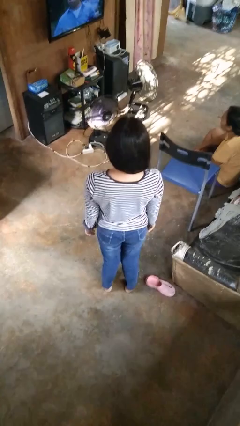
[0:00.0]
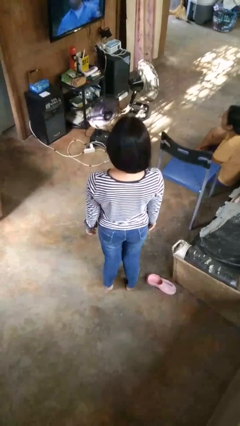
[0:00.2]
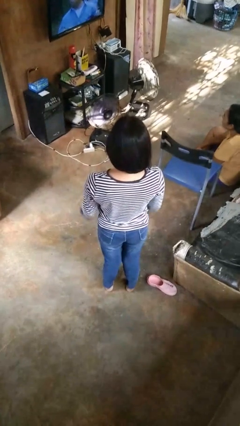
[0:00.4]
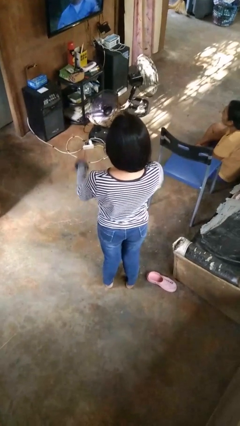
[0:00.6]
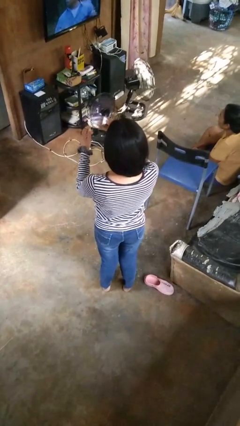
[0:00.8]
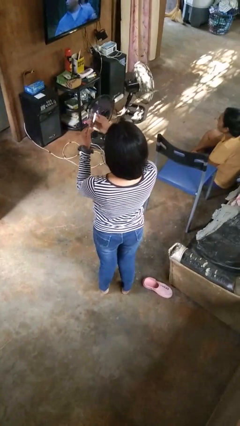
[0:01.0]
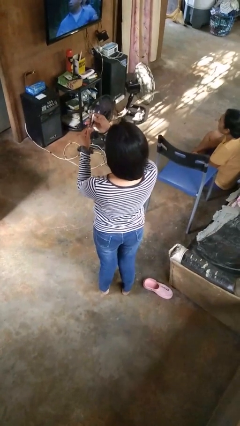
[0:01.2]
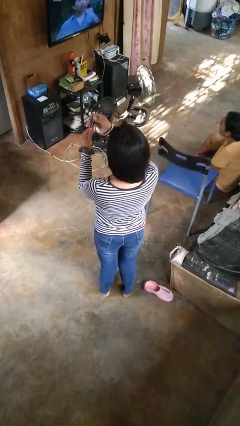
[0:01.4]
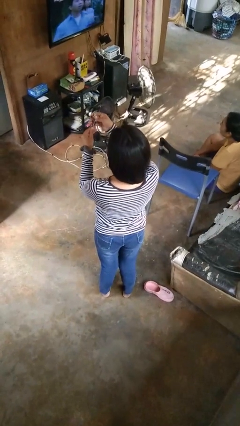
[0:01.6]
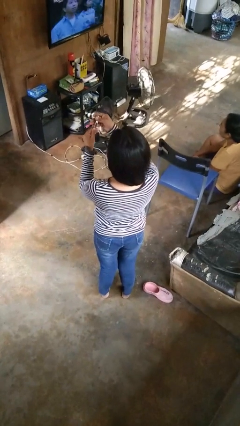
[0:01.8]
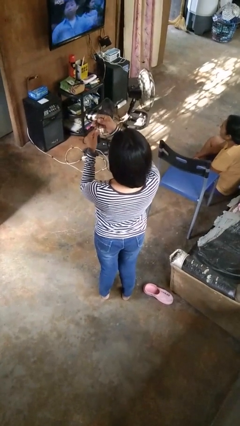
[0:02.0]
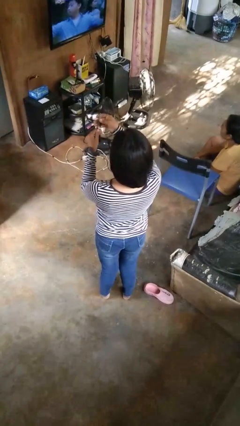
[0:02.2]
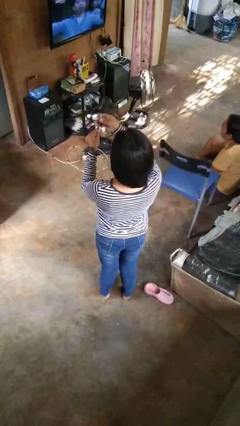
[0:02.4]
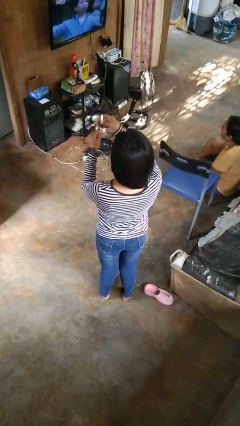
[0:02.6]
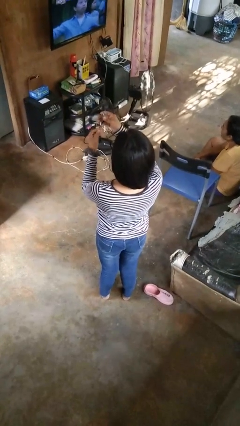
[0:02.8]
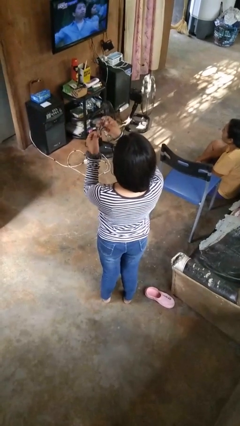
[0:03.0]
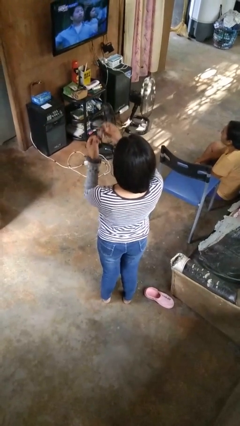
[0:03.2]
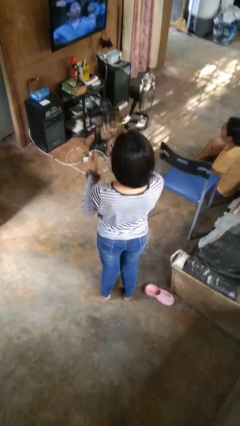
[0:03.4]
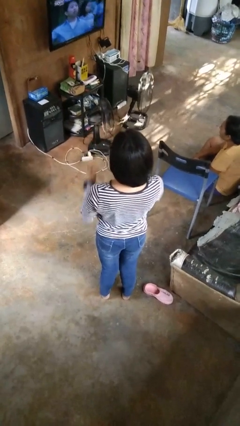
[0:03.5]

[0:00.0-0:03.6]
person clips fingernails

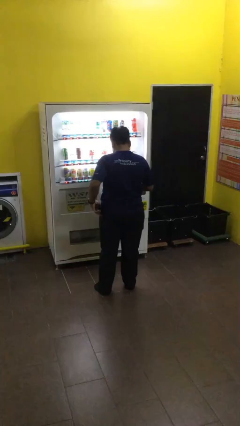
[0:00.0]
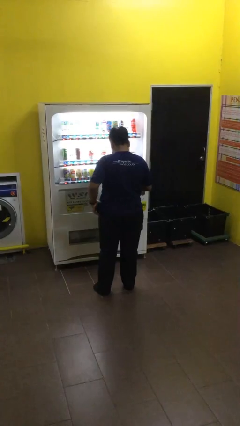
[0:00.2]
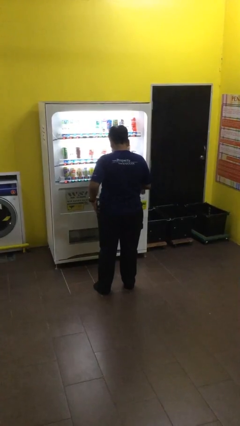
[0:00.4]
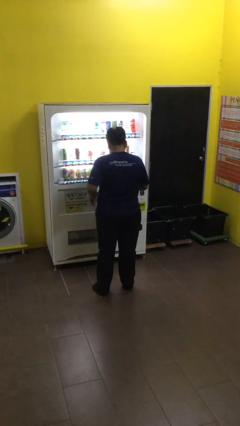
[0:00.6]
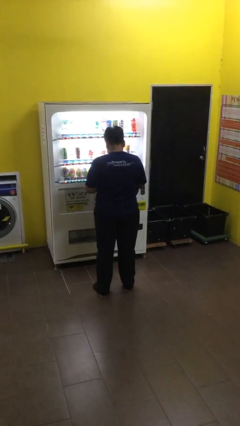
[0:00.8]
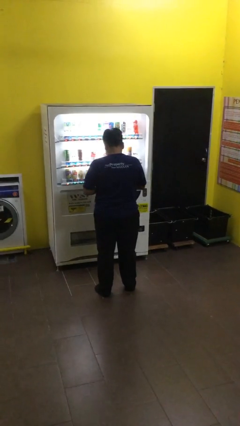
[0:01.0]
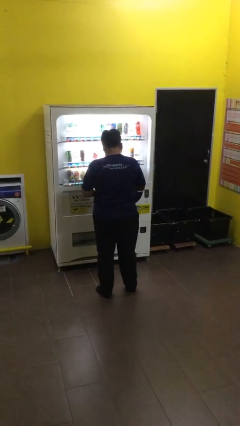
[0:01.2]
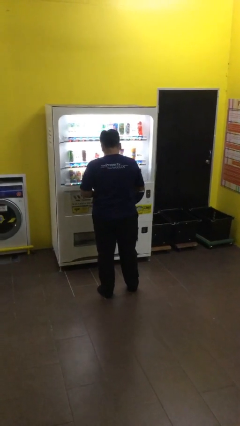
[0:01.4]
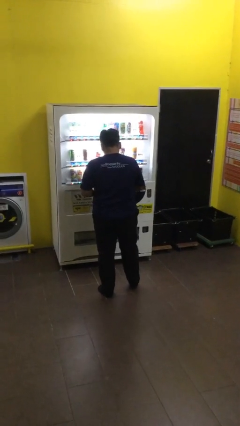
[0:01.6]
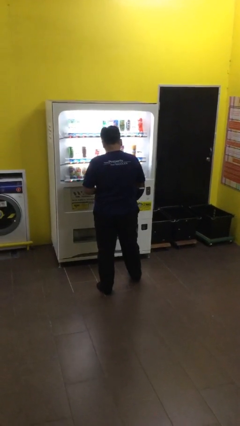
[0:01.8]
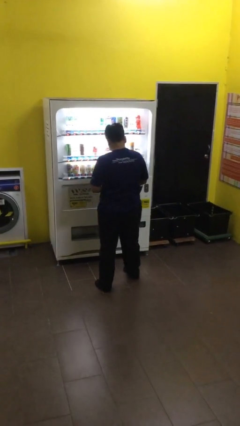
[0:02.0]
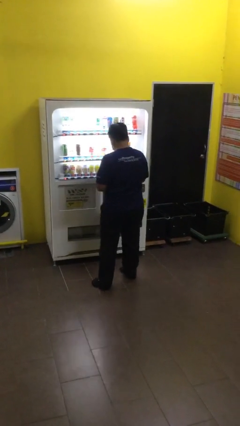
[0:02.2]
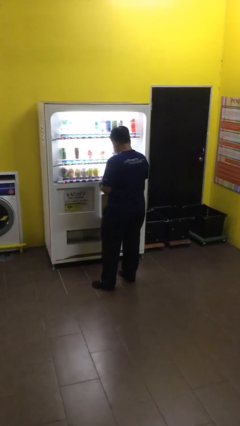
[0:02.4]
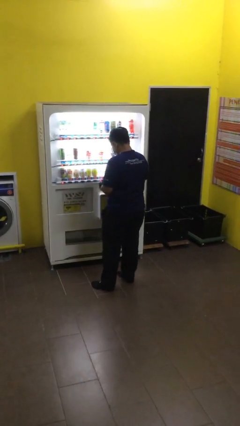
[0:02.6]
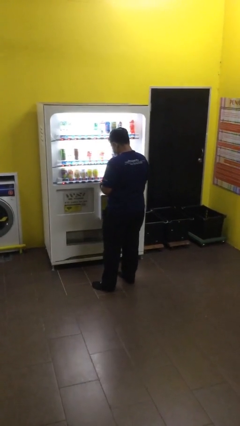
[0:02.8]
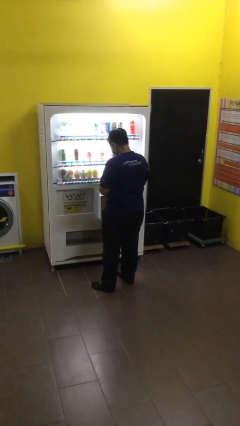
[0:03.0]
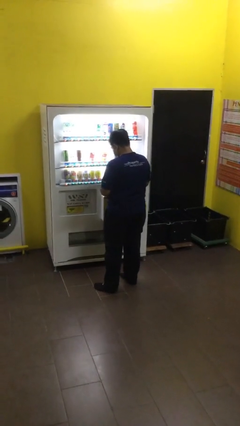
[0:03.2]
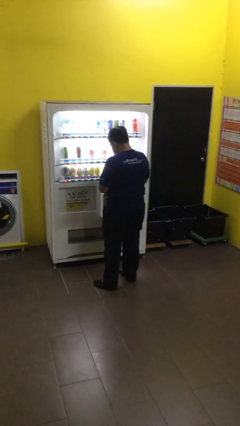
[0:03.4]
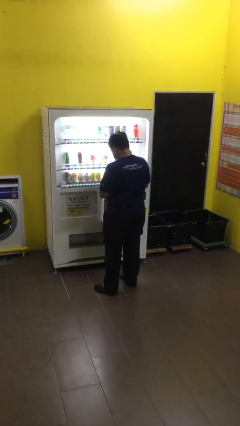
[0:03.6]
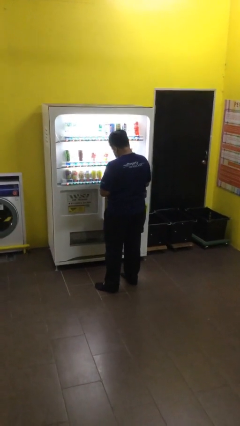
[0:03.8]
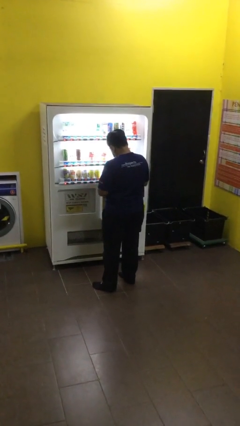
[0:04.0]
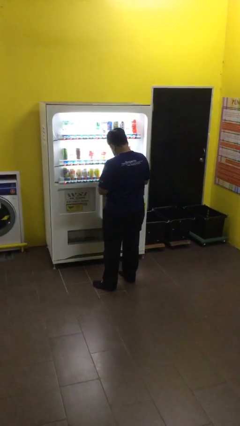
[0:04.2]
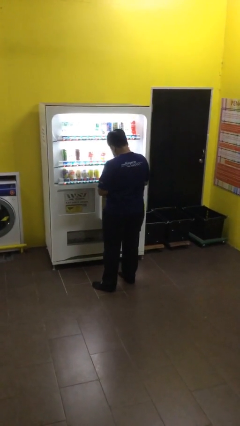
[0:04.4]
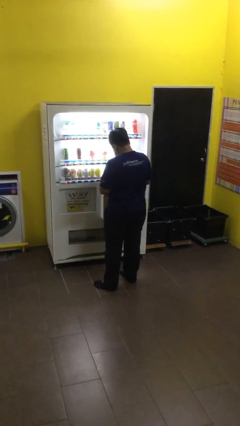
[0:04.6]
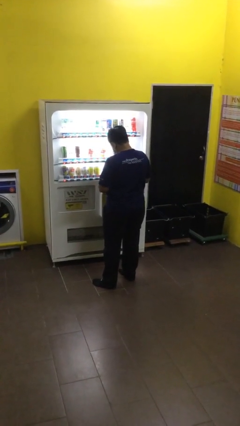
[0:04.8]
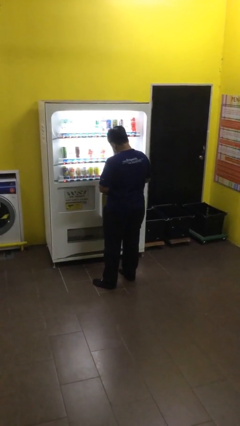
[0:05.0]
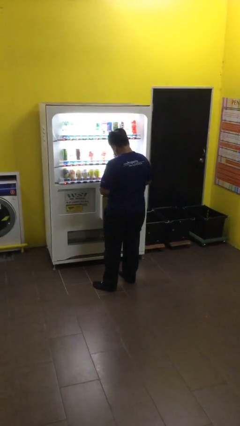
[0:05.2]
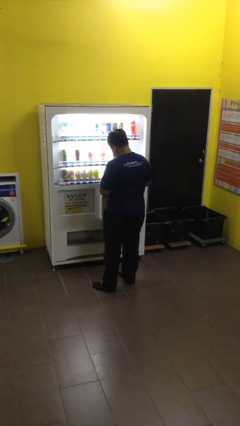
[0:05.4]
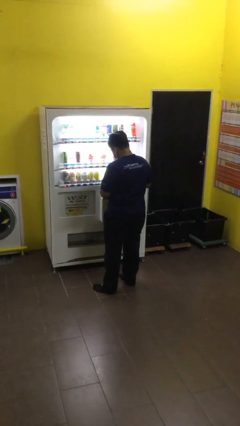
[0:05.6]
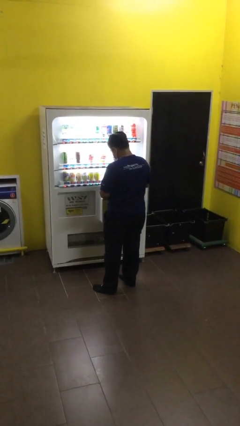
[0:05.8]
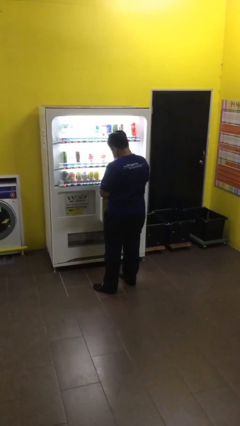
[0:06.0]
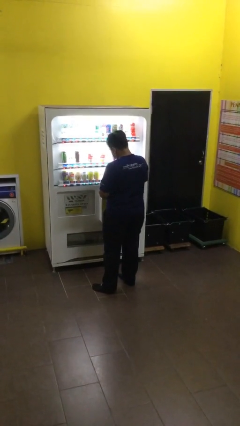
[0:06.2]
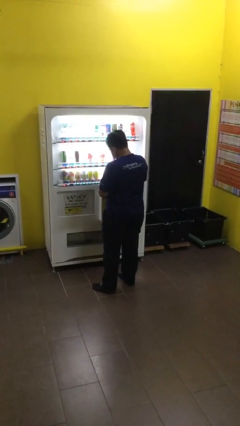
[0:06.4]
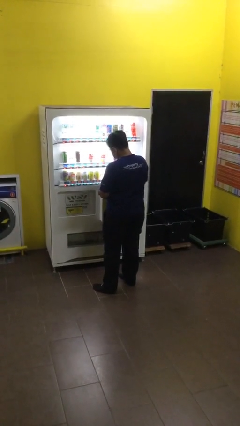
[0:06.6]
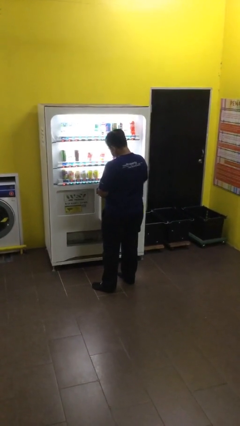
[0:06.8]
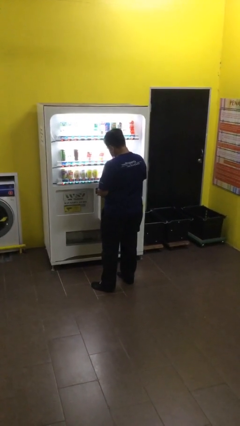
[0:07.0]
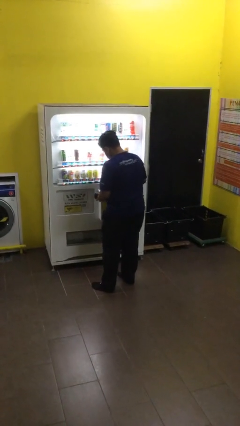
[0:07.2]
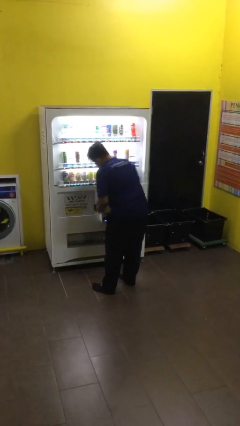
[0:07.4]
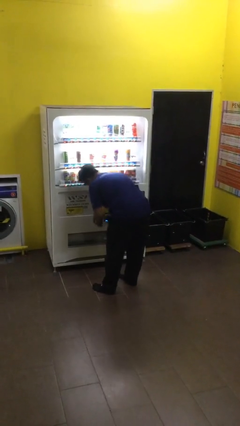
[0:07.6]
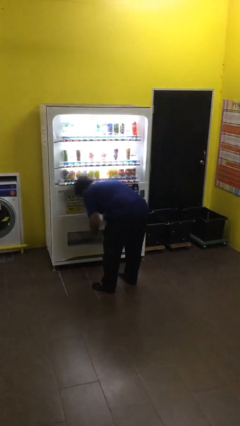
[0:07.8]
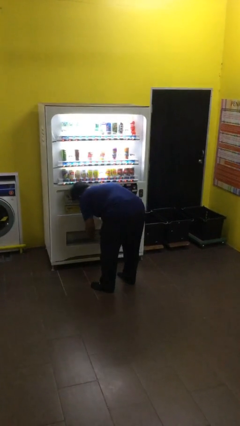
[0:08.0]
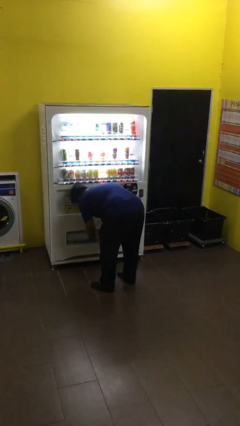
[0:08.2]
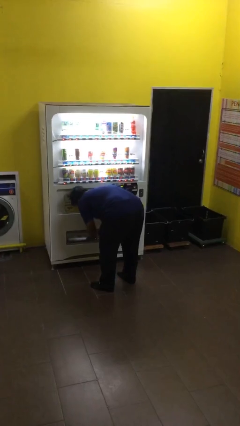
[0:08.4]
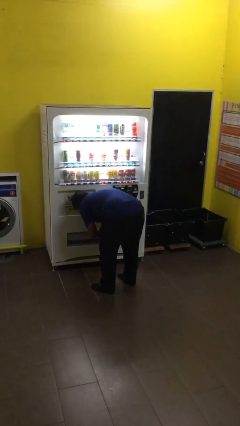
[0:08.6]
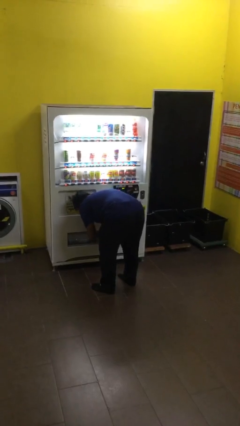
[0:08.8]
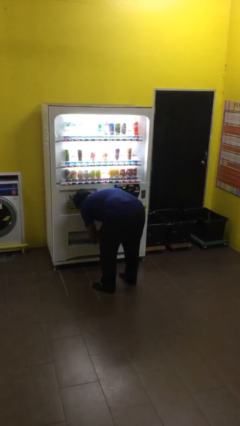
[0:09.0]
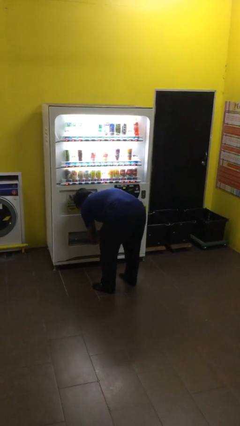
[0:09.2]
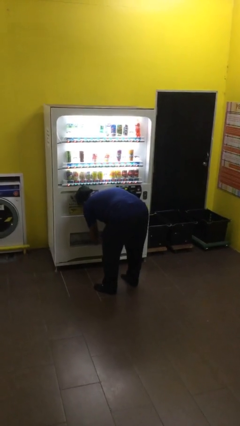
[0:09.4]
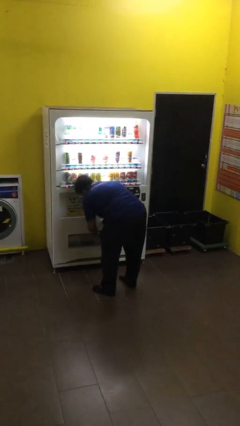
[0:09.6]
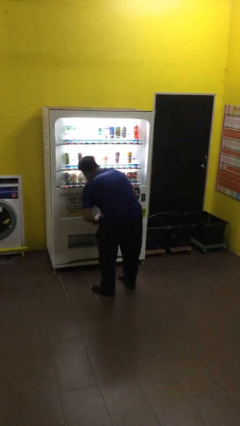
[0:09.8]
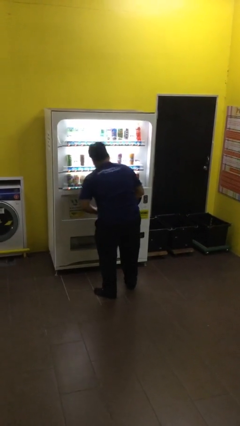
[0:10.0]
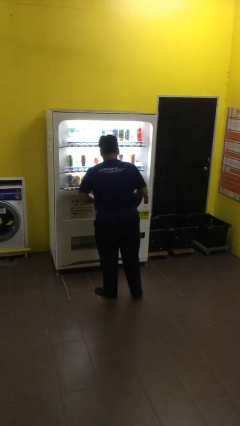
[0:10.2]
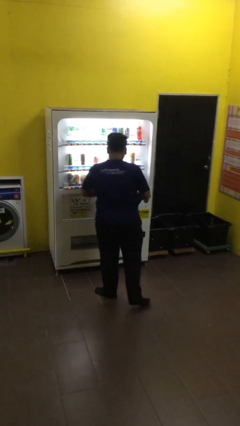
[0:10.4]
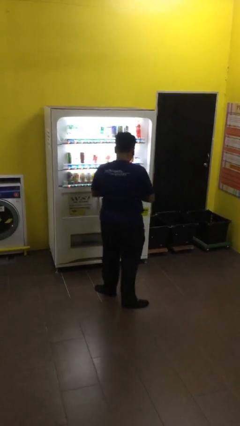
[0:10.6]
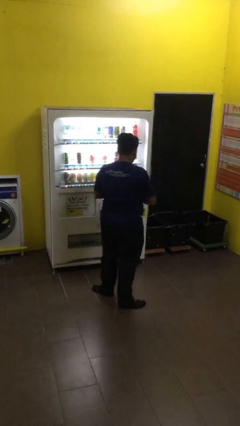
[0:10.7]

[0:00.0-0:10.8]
person purchases from machine

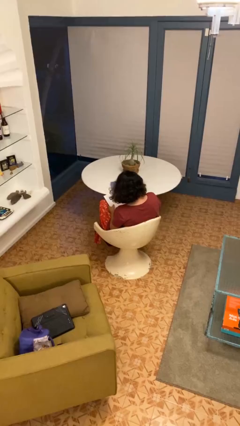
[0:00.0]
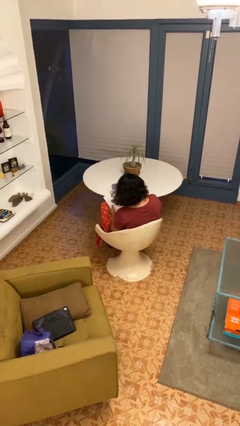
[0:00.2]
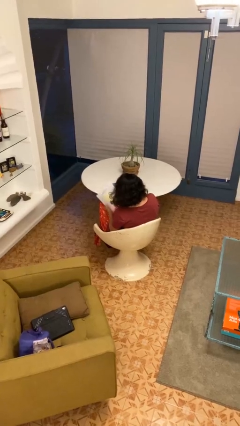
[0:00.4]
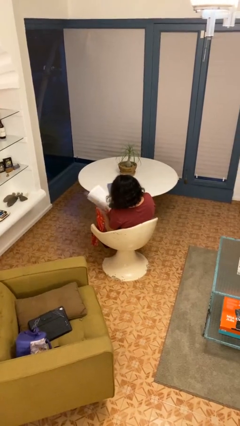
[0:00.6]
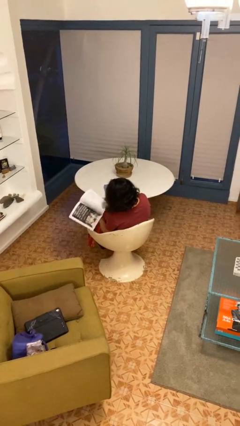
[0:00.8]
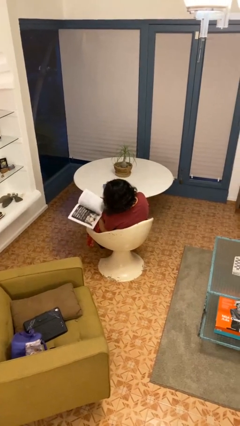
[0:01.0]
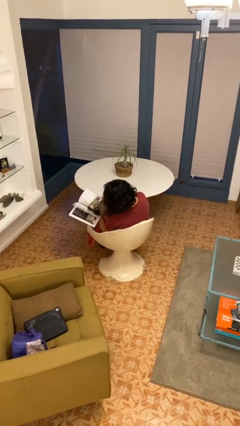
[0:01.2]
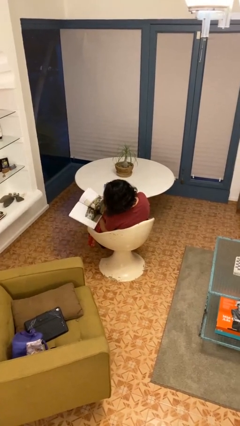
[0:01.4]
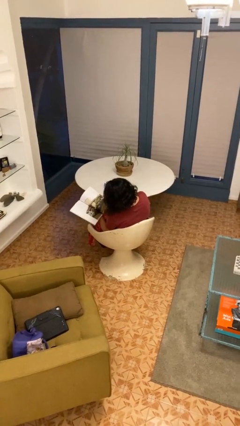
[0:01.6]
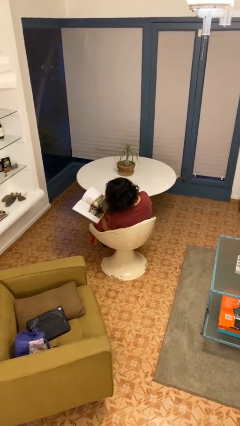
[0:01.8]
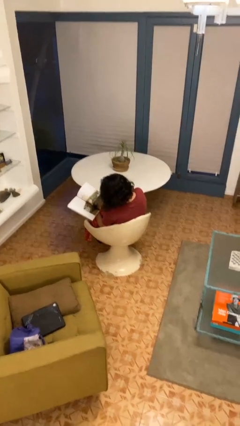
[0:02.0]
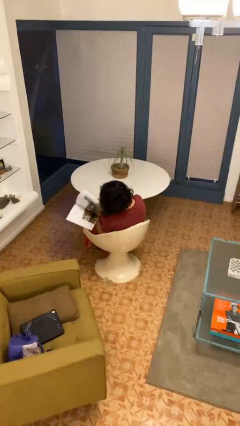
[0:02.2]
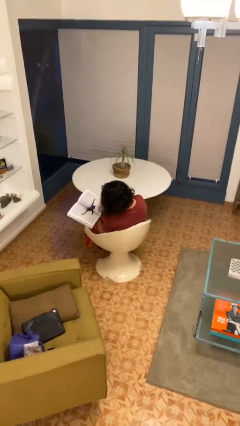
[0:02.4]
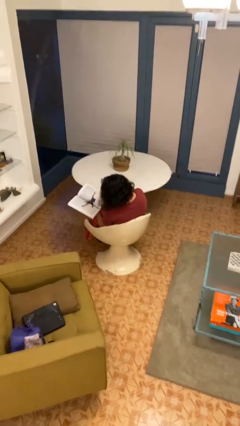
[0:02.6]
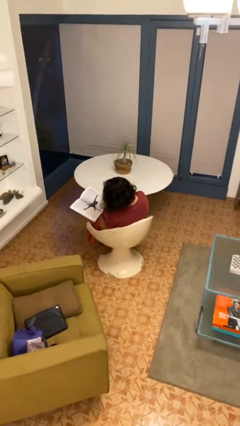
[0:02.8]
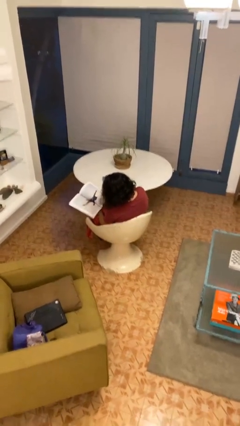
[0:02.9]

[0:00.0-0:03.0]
person reads magazine

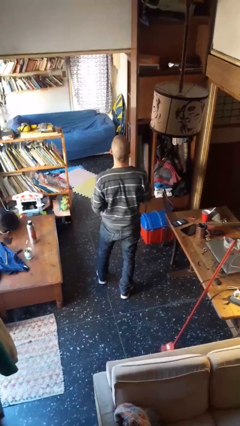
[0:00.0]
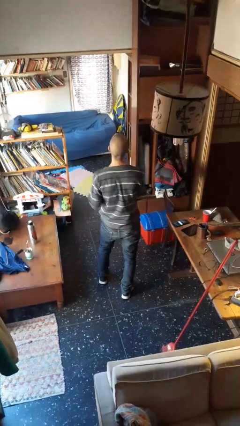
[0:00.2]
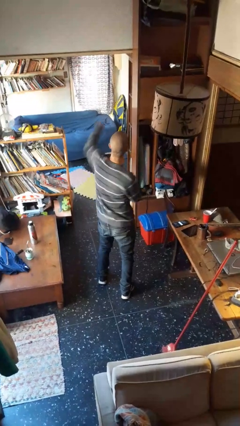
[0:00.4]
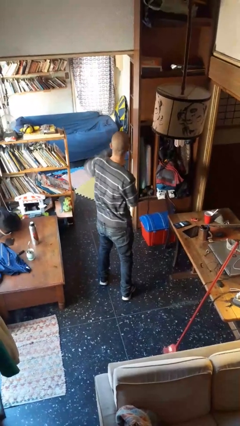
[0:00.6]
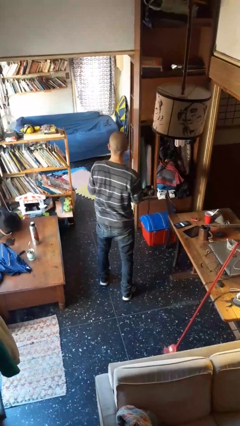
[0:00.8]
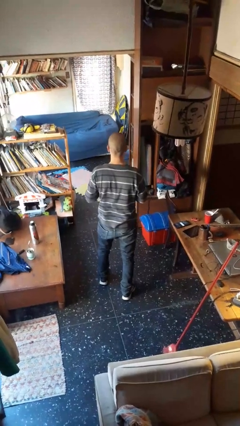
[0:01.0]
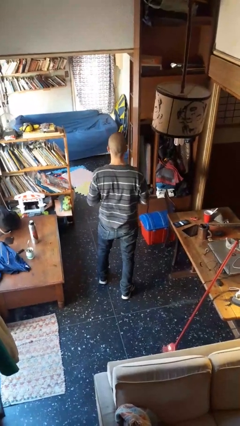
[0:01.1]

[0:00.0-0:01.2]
person karate chop
